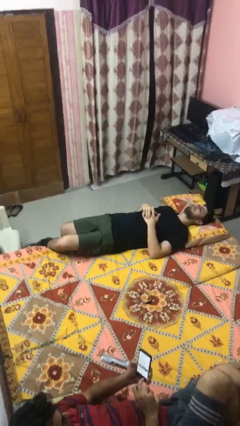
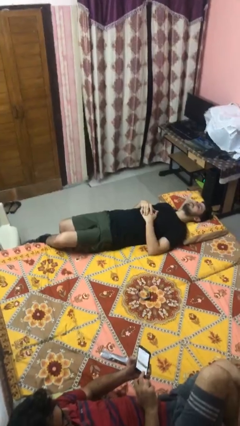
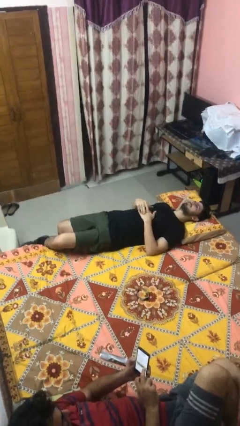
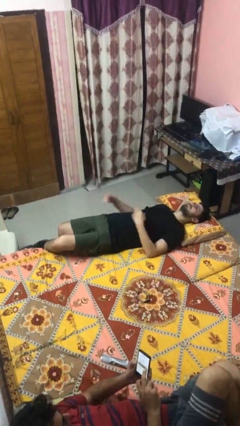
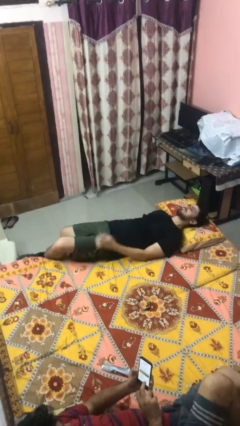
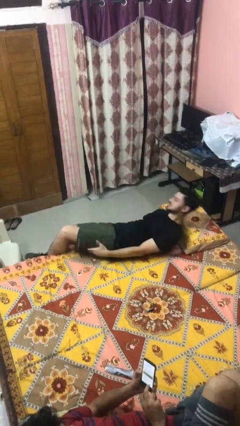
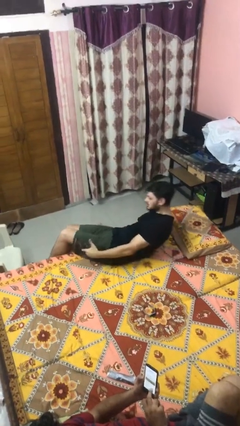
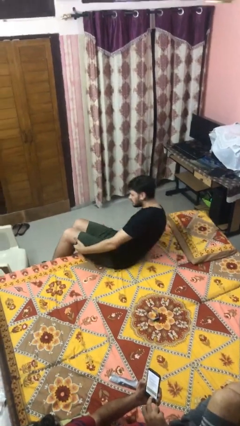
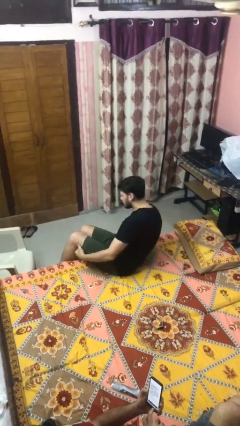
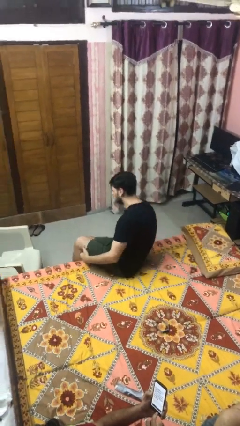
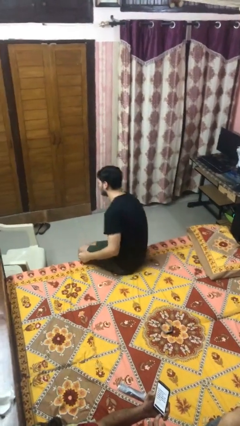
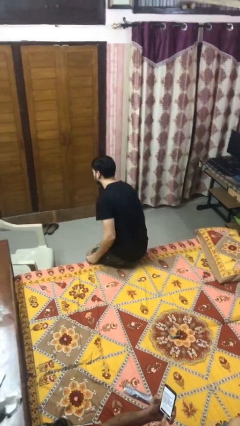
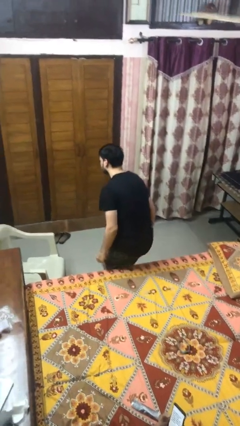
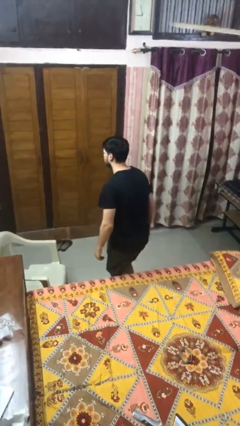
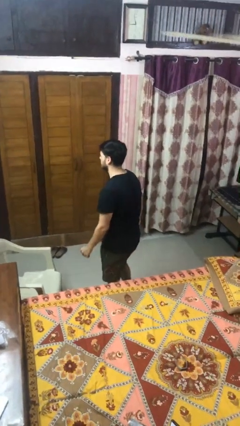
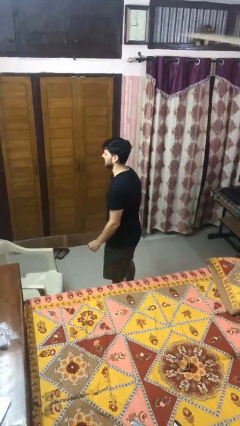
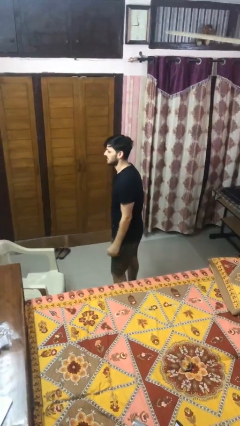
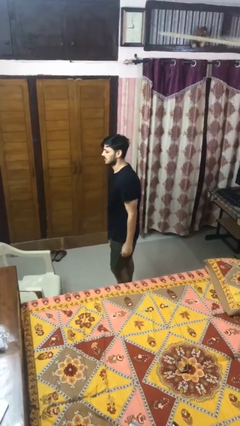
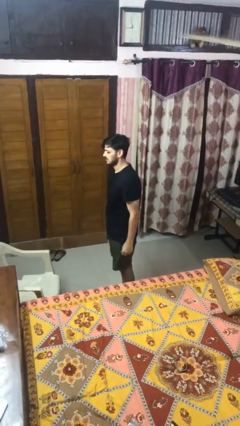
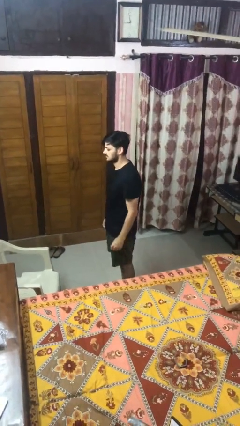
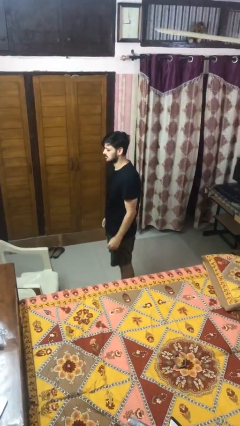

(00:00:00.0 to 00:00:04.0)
person stands up

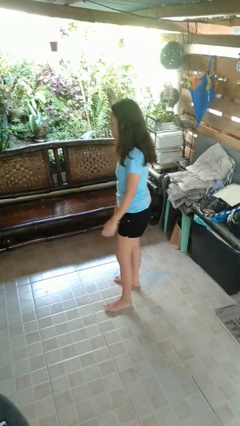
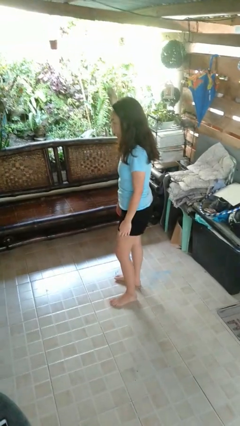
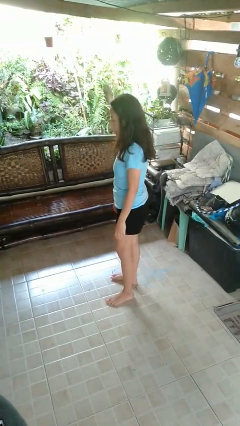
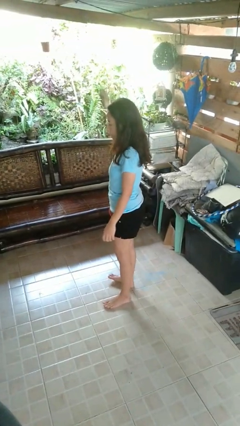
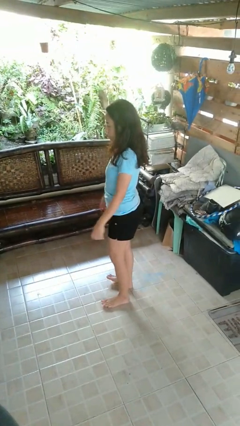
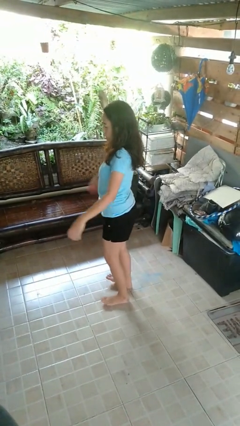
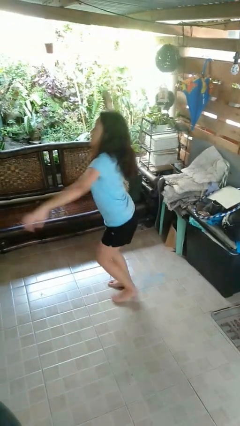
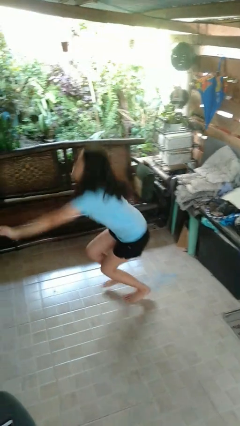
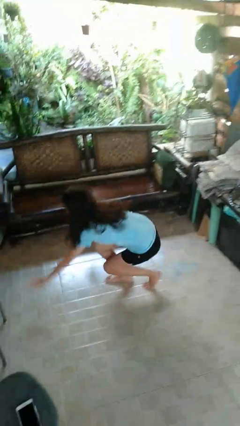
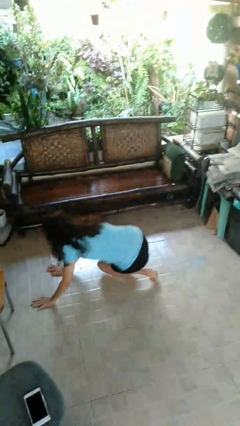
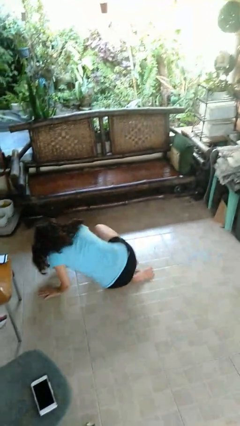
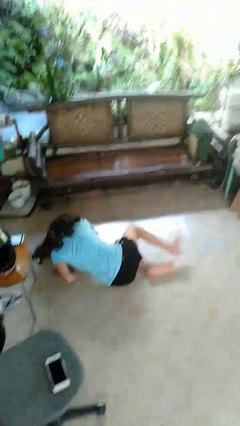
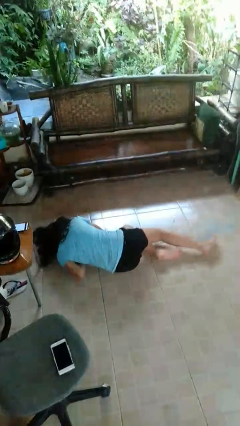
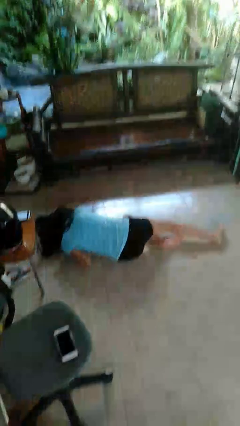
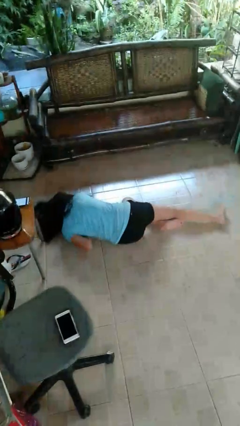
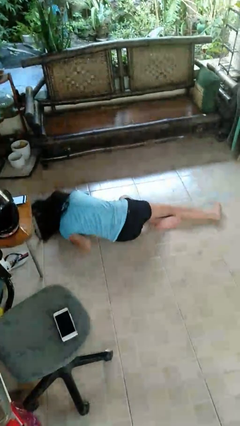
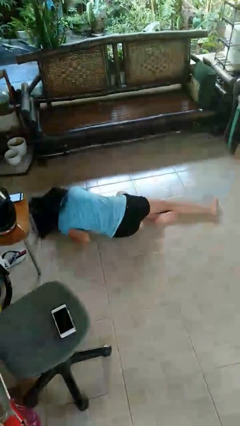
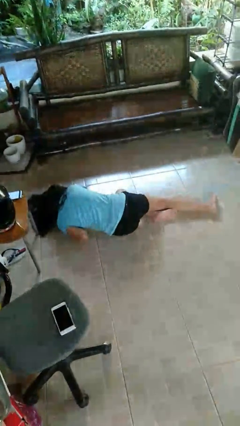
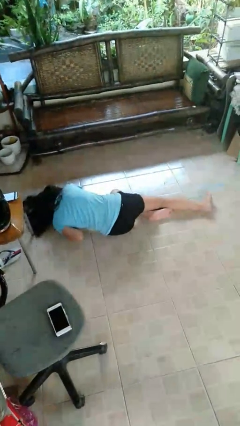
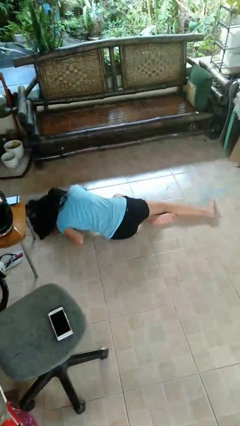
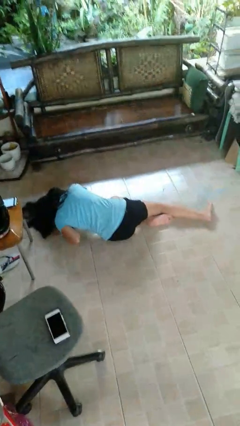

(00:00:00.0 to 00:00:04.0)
person falls while standing

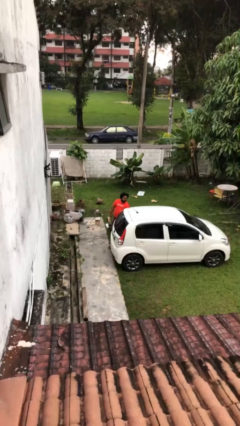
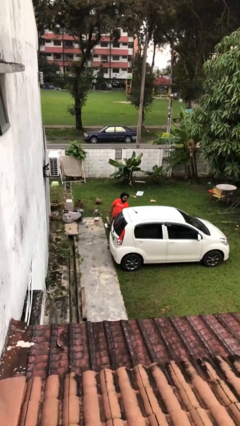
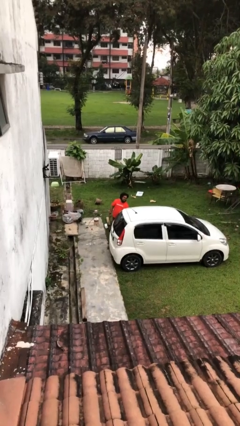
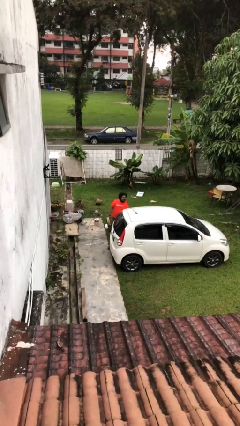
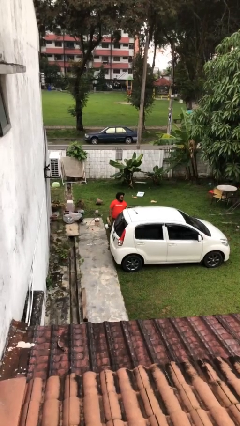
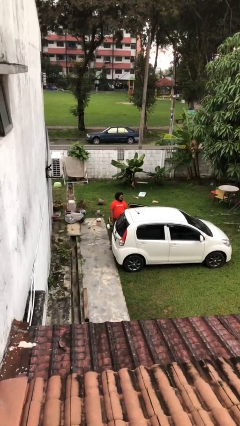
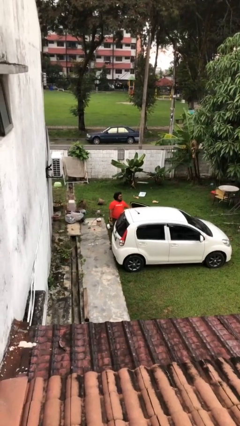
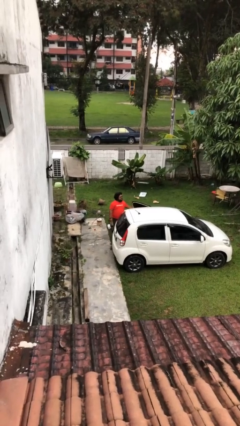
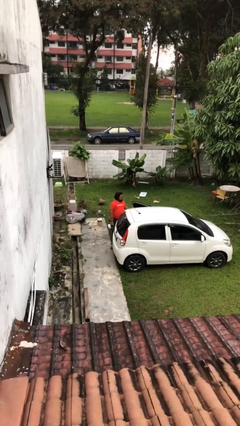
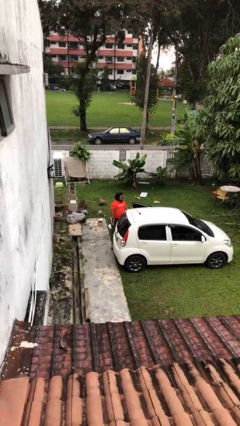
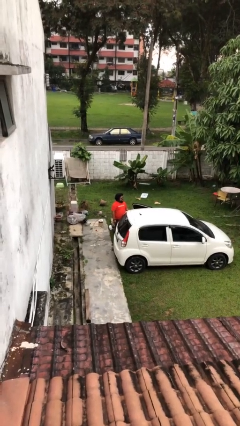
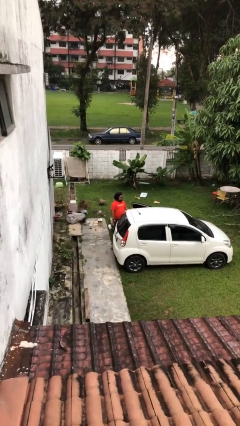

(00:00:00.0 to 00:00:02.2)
person opens car door

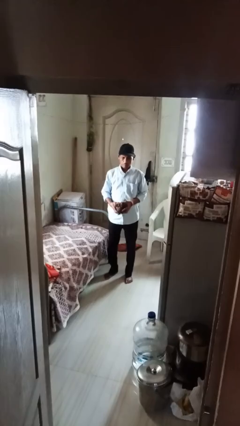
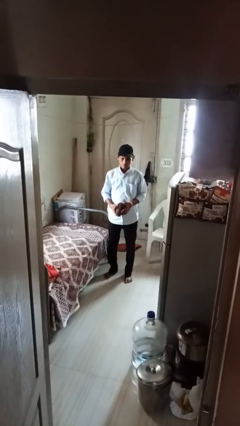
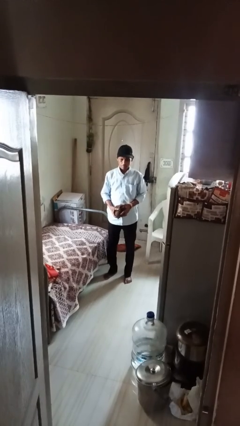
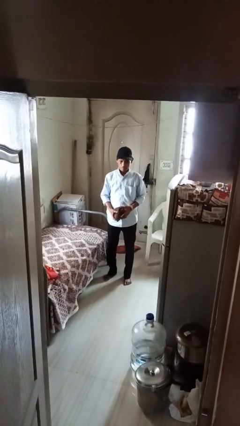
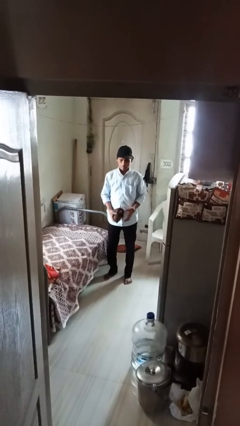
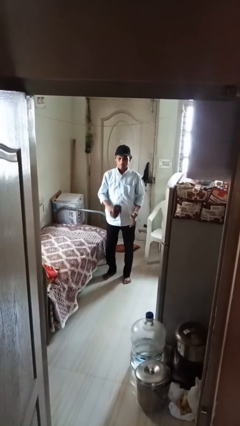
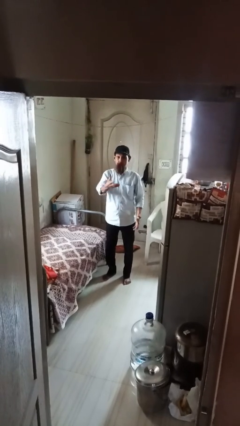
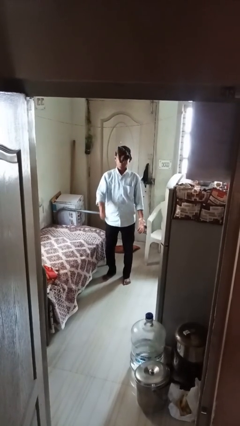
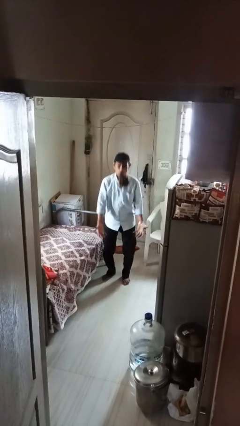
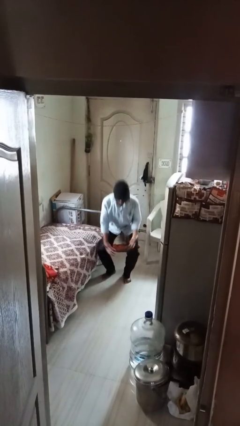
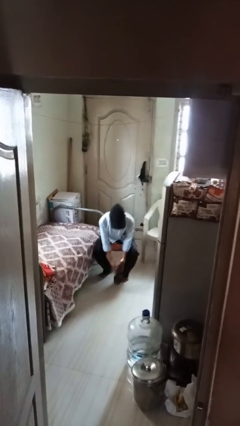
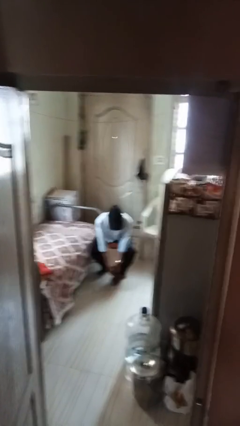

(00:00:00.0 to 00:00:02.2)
person drops object

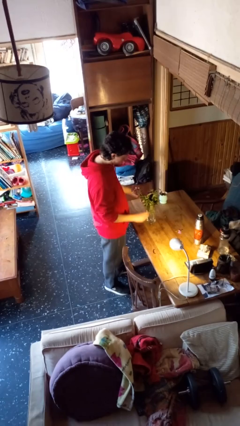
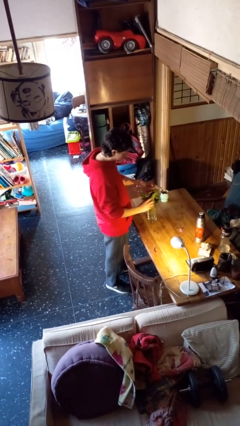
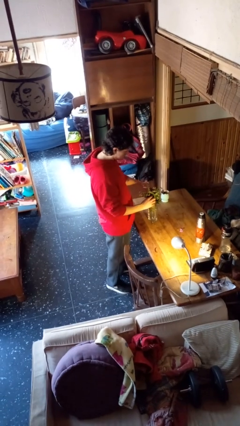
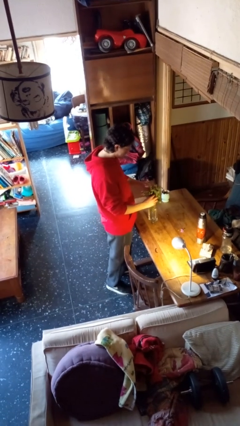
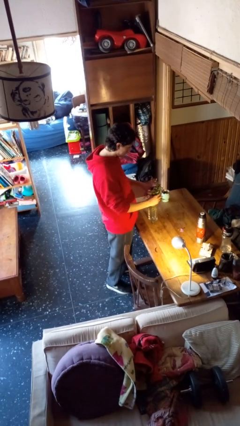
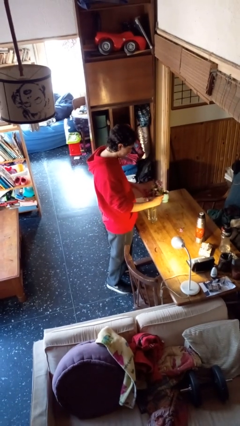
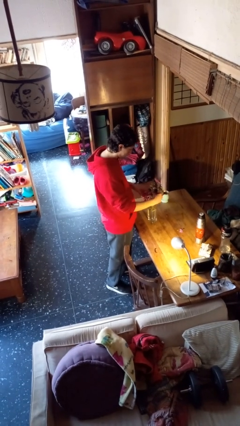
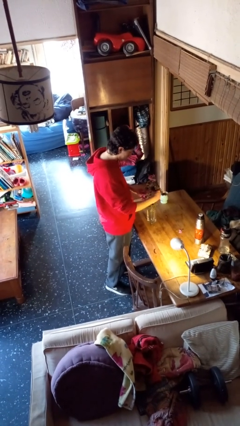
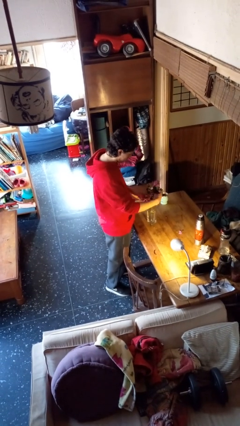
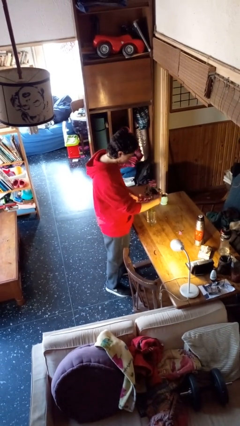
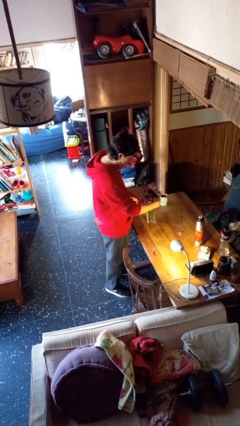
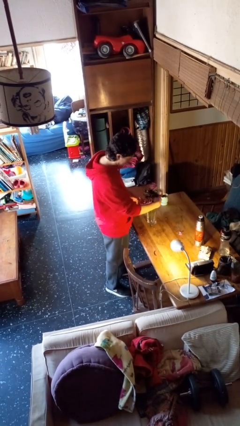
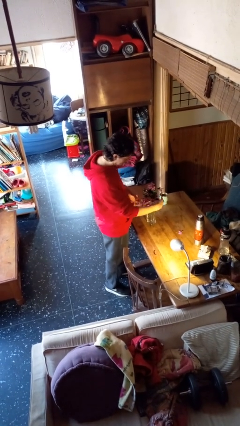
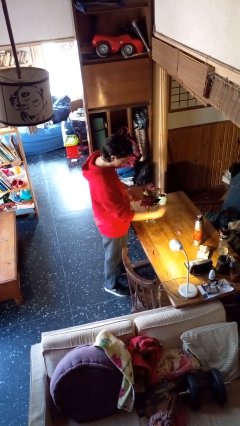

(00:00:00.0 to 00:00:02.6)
person arranges flowers in vase

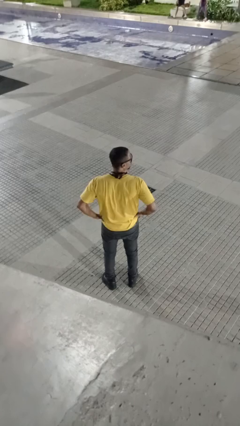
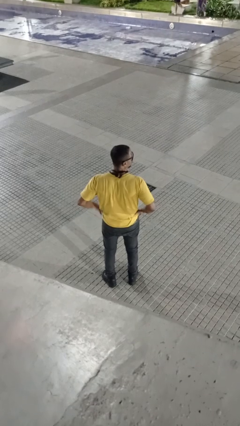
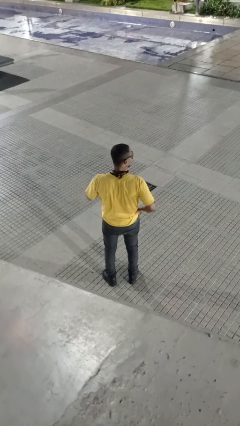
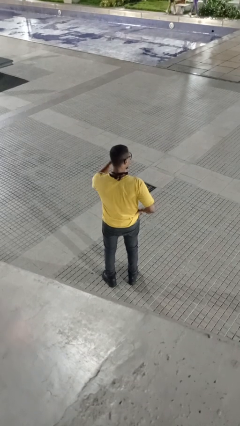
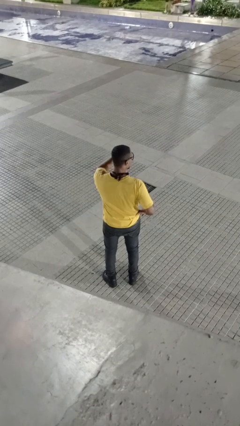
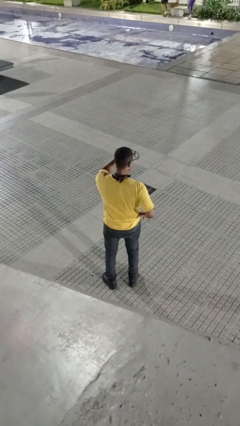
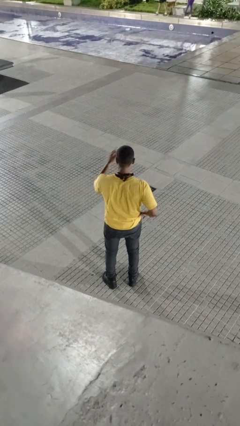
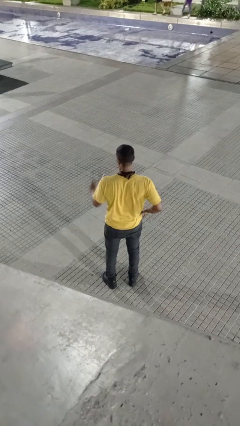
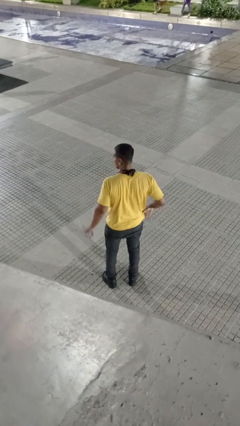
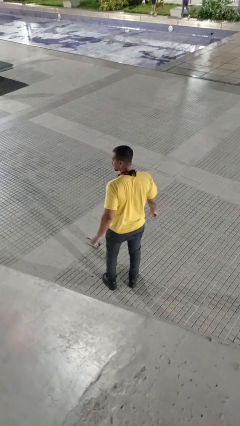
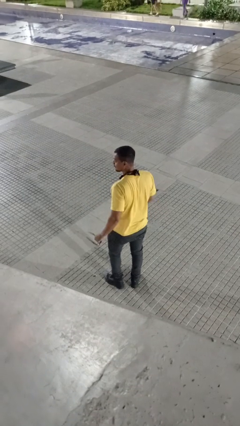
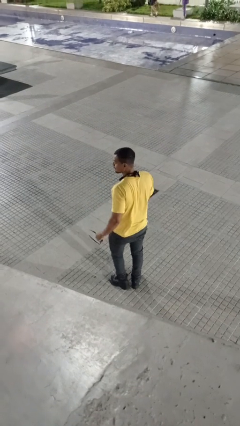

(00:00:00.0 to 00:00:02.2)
person takes off glasses
